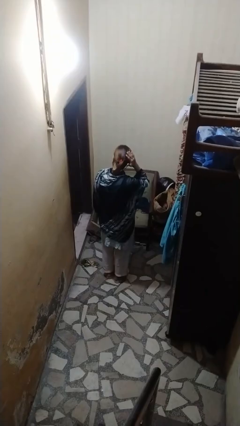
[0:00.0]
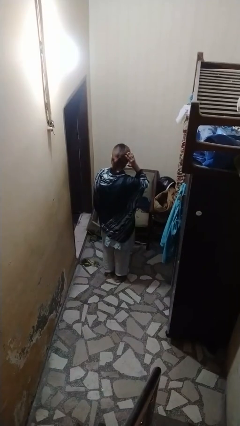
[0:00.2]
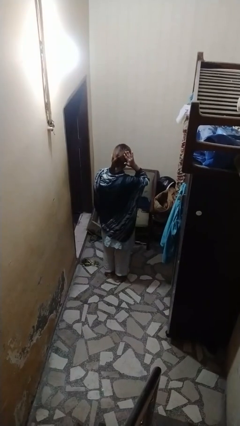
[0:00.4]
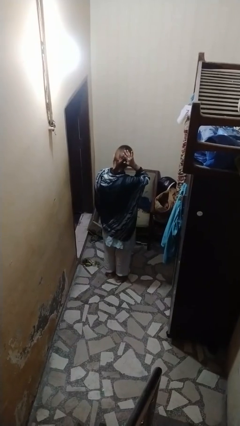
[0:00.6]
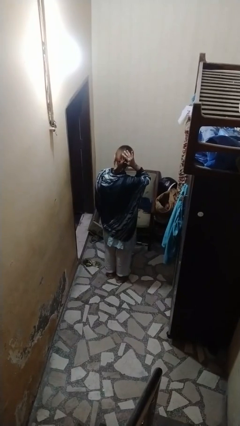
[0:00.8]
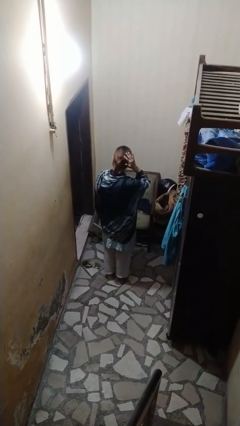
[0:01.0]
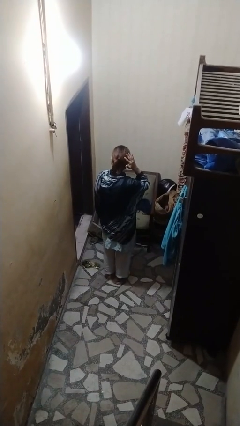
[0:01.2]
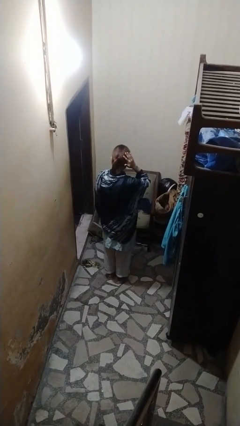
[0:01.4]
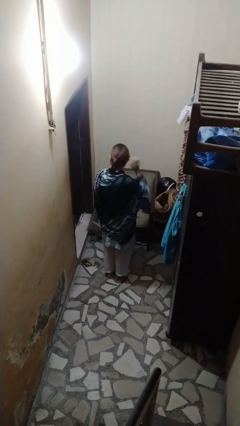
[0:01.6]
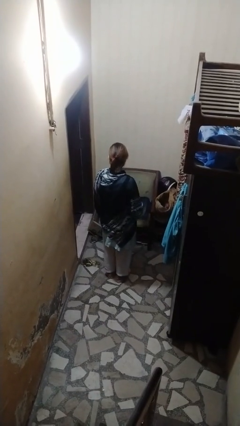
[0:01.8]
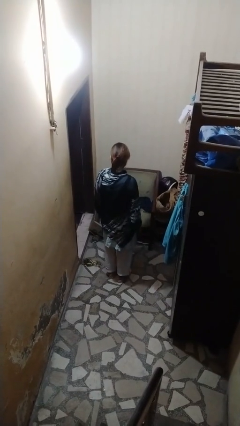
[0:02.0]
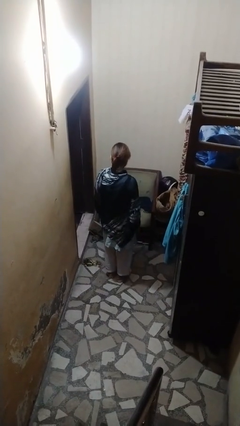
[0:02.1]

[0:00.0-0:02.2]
person strokes hair

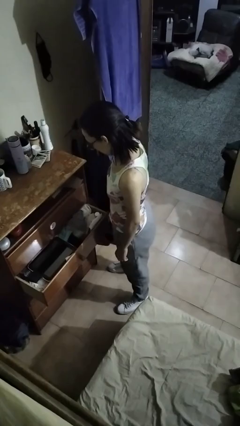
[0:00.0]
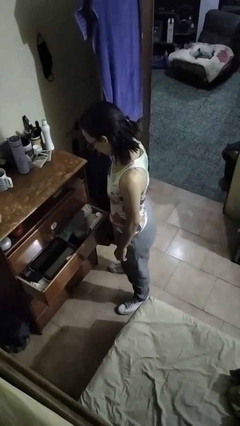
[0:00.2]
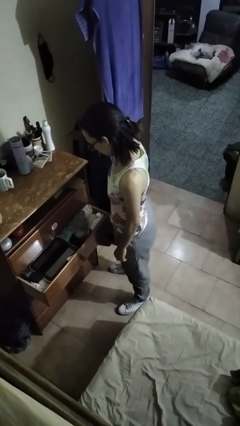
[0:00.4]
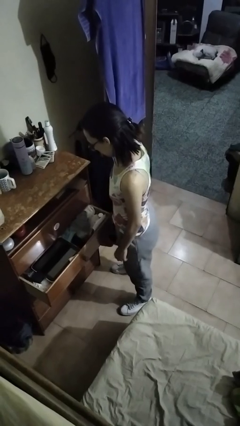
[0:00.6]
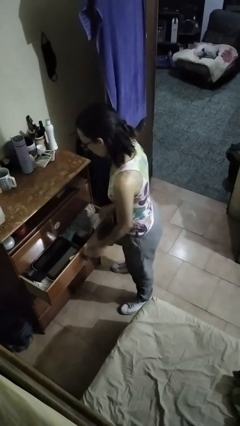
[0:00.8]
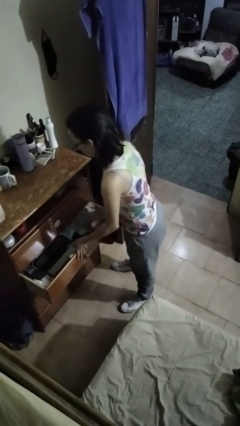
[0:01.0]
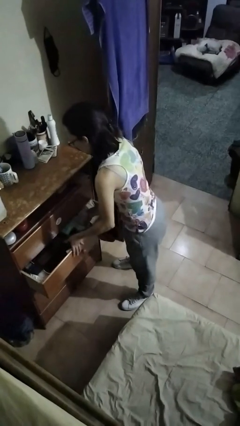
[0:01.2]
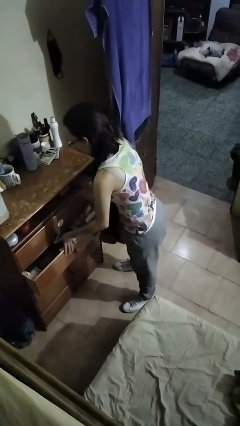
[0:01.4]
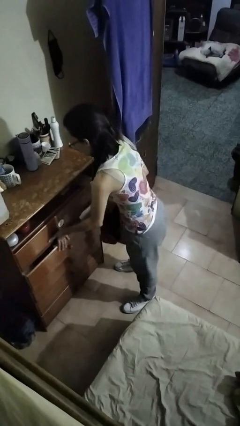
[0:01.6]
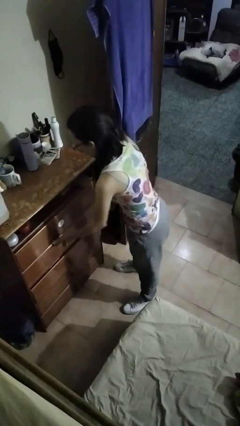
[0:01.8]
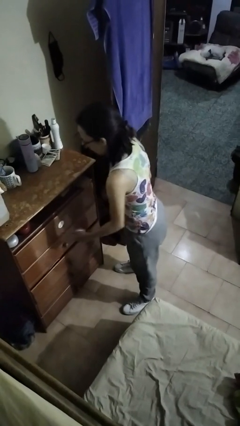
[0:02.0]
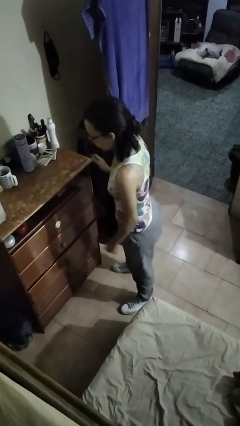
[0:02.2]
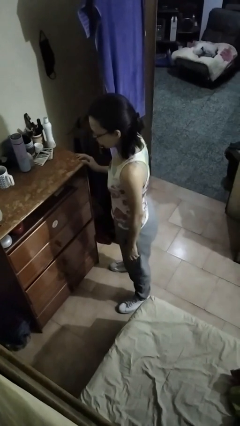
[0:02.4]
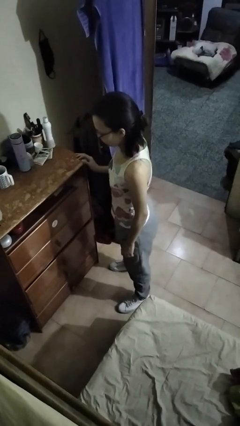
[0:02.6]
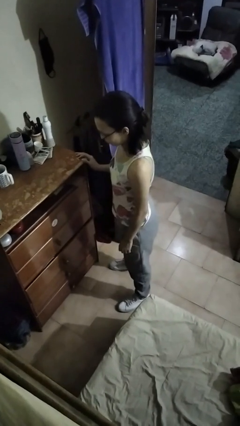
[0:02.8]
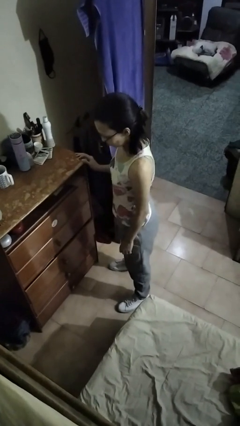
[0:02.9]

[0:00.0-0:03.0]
person closes dresser drawer

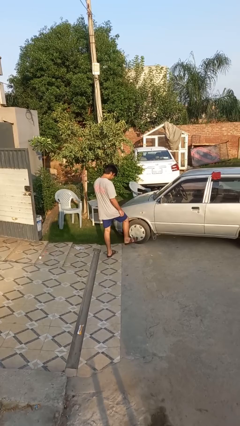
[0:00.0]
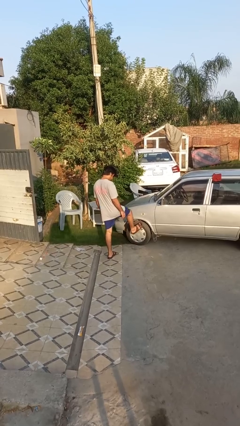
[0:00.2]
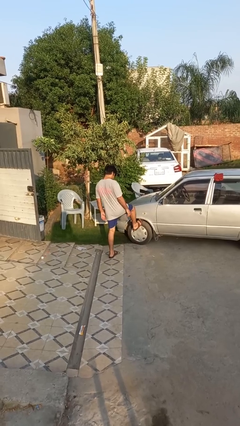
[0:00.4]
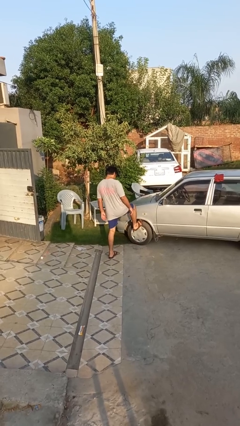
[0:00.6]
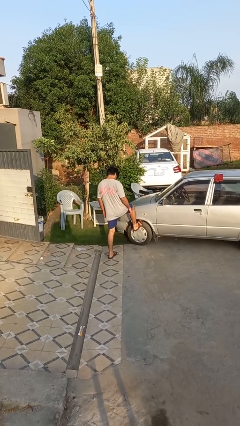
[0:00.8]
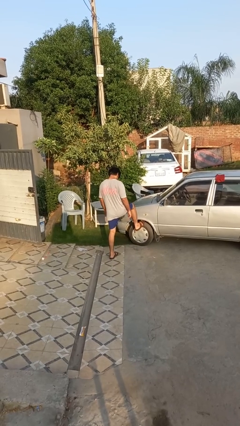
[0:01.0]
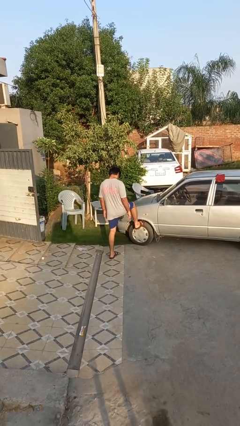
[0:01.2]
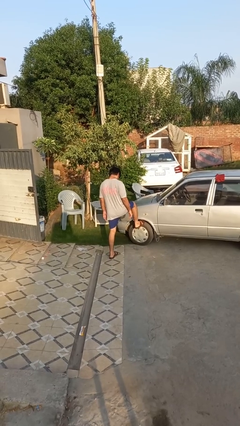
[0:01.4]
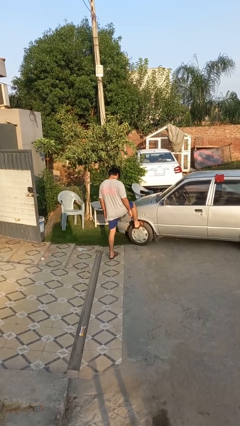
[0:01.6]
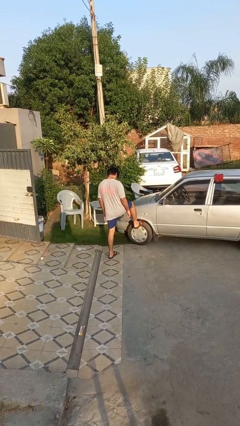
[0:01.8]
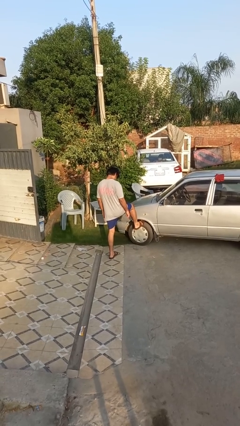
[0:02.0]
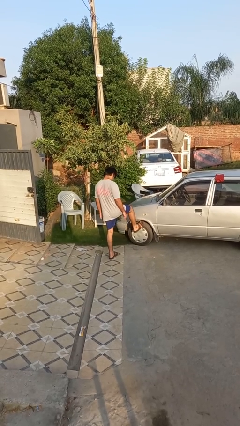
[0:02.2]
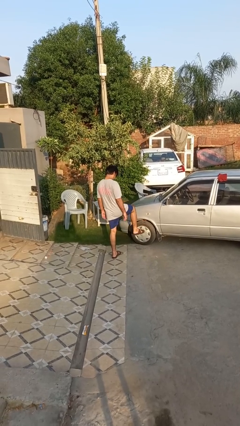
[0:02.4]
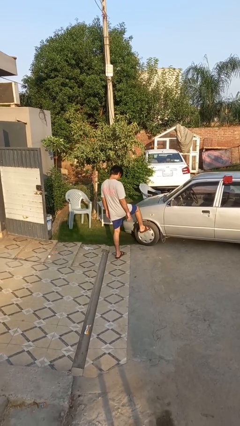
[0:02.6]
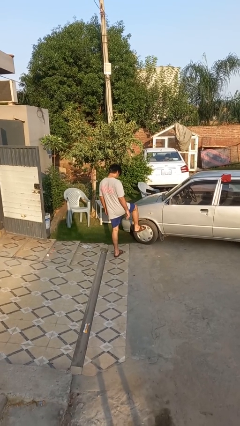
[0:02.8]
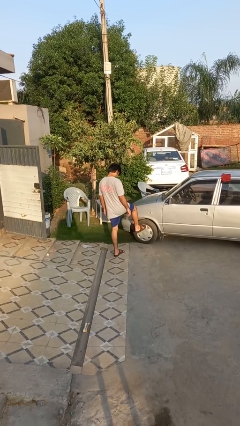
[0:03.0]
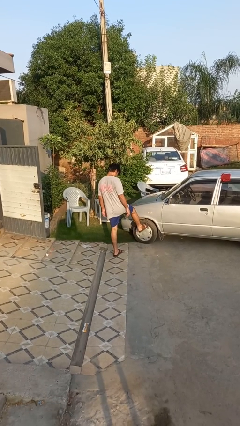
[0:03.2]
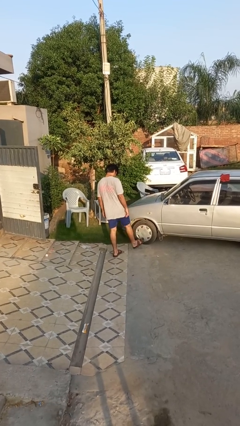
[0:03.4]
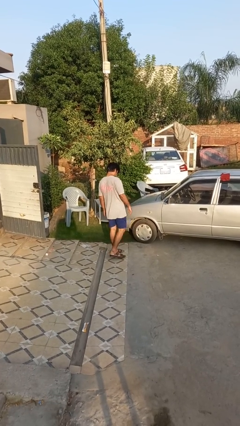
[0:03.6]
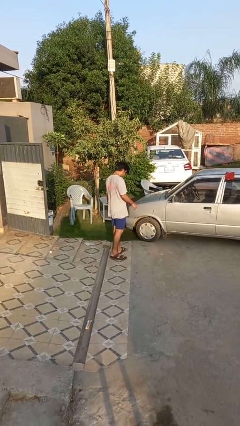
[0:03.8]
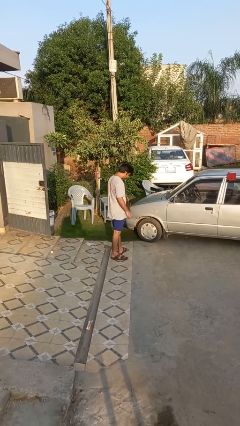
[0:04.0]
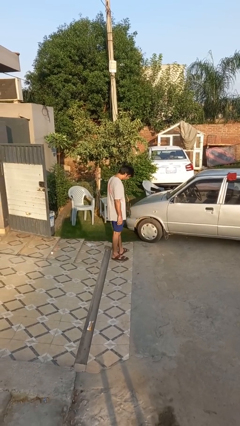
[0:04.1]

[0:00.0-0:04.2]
person kicks car tires

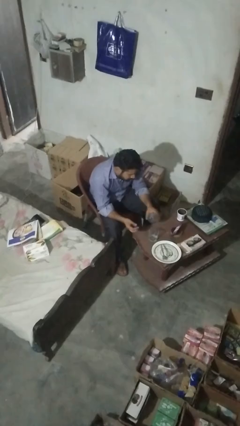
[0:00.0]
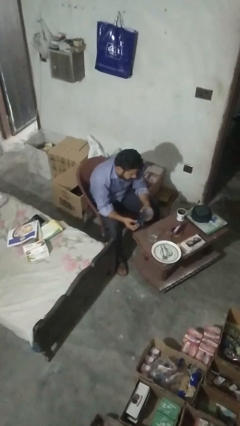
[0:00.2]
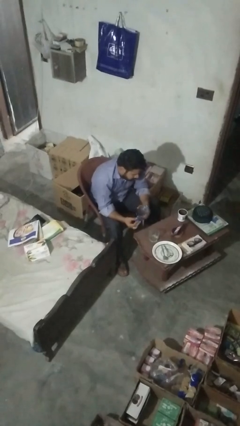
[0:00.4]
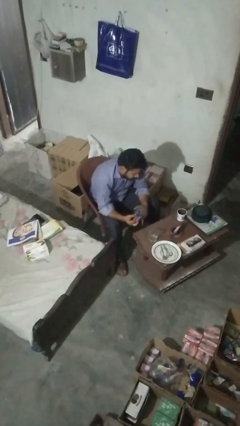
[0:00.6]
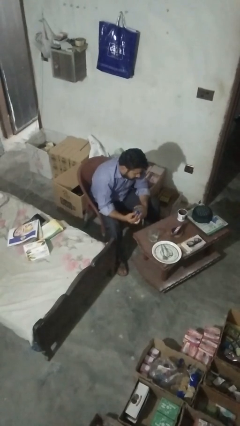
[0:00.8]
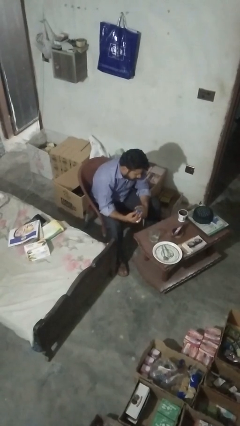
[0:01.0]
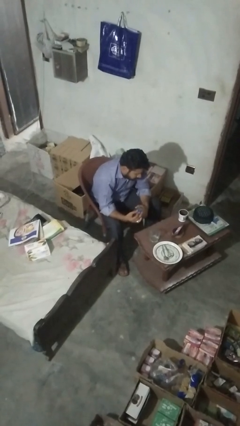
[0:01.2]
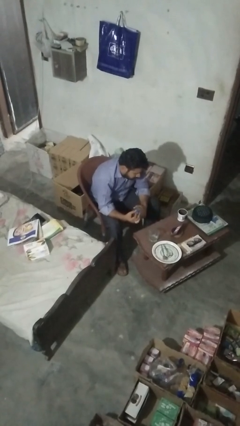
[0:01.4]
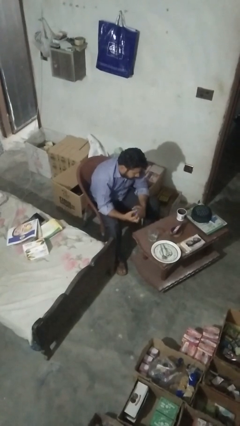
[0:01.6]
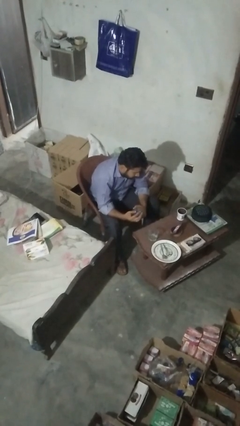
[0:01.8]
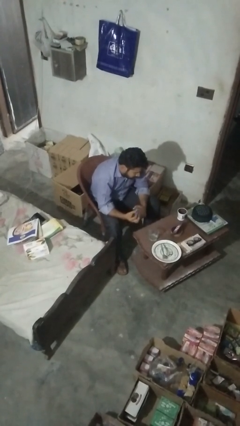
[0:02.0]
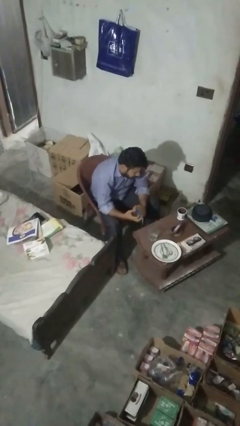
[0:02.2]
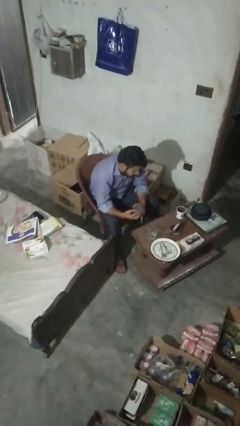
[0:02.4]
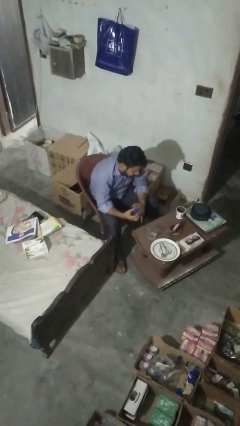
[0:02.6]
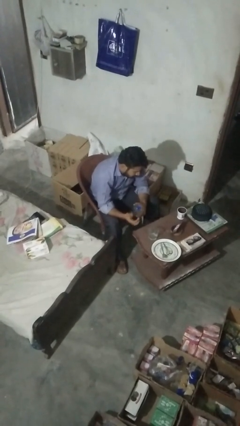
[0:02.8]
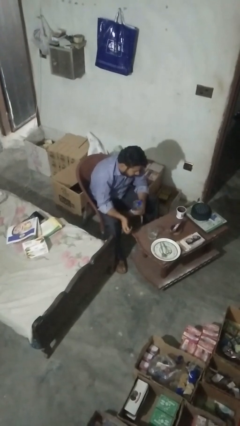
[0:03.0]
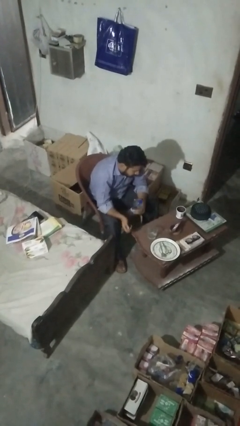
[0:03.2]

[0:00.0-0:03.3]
person screws lid to bottle

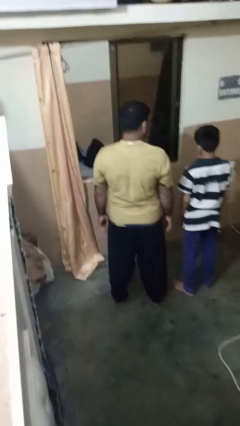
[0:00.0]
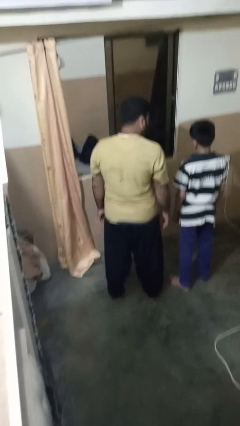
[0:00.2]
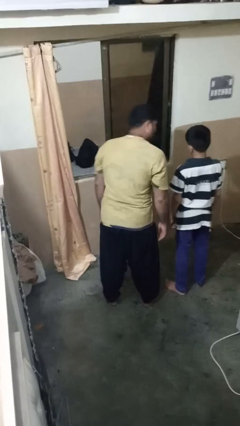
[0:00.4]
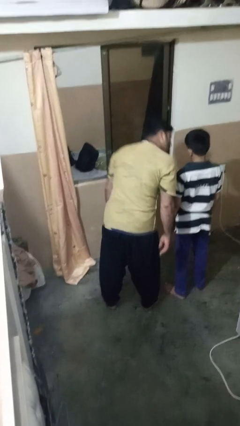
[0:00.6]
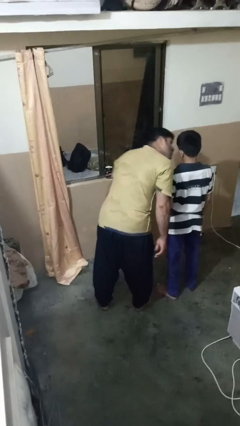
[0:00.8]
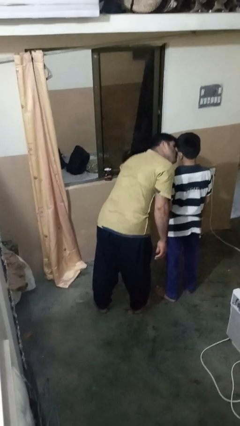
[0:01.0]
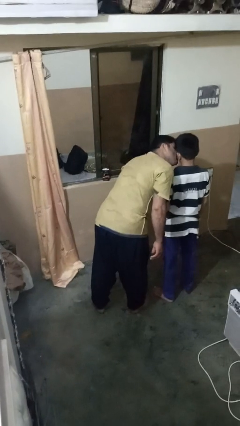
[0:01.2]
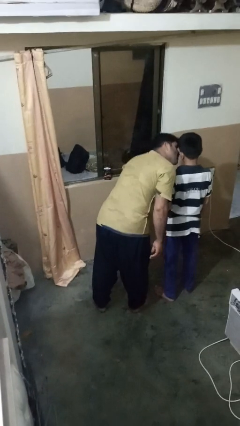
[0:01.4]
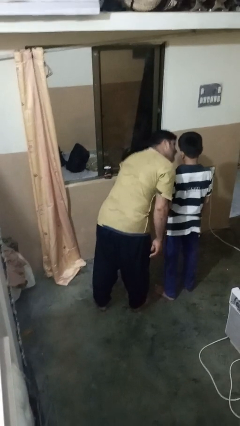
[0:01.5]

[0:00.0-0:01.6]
person kisses cheek of person

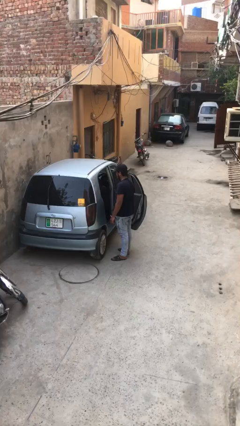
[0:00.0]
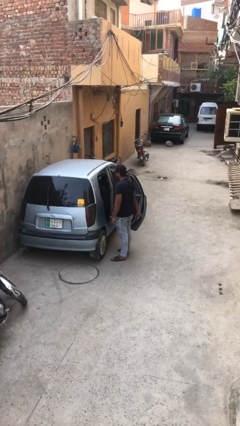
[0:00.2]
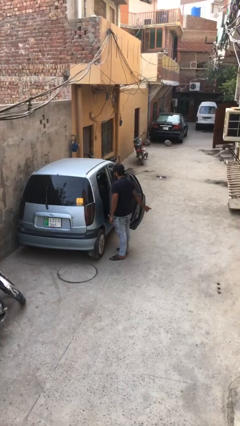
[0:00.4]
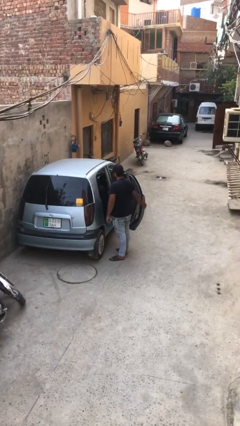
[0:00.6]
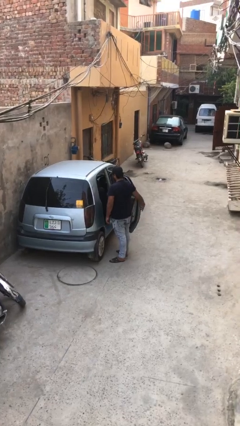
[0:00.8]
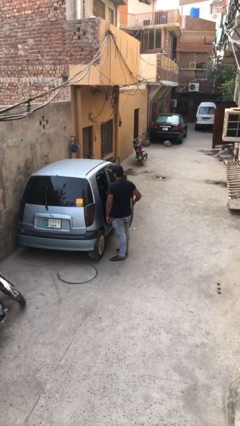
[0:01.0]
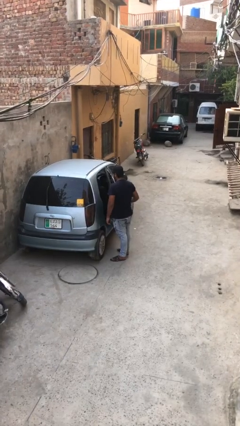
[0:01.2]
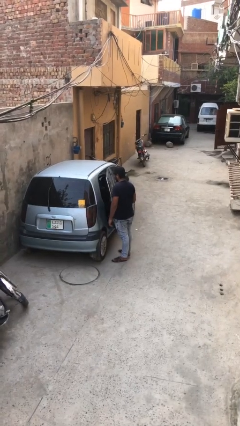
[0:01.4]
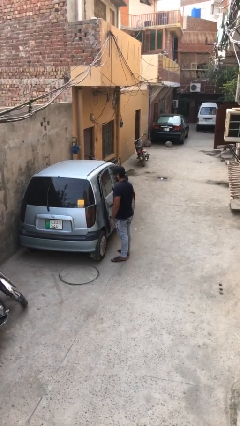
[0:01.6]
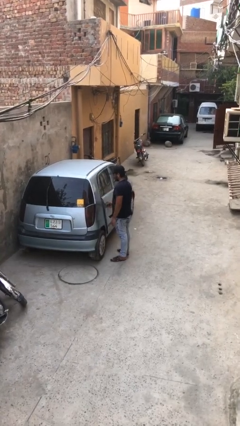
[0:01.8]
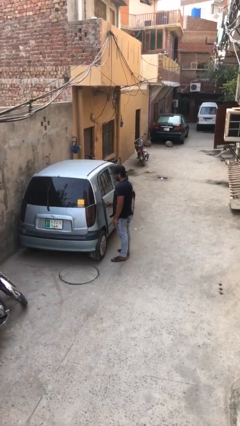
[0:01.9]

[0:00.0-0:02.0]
person closes car door

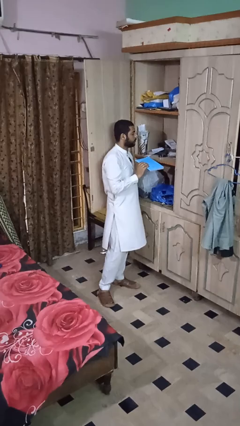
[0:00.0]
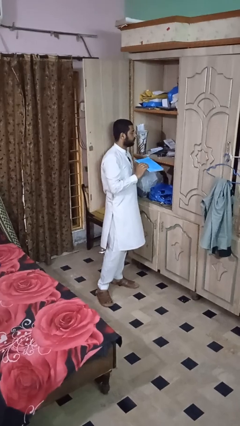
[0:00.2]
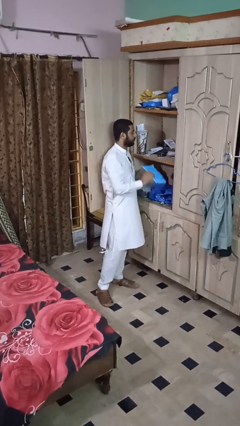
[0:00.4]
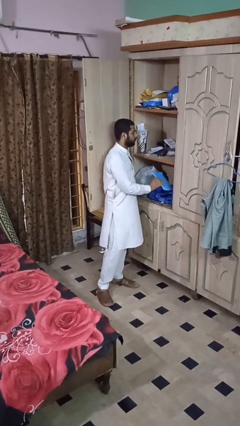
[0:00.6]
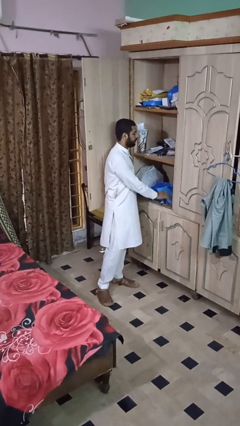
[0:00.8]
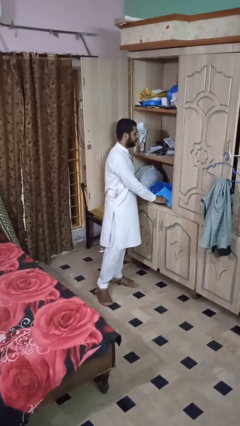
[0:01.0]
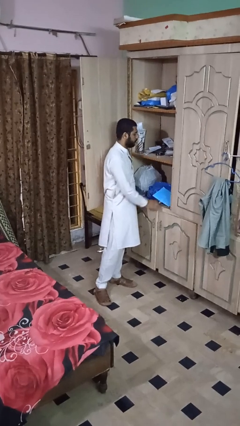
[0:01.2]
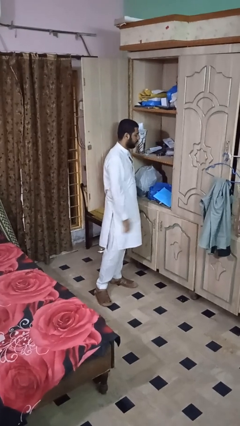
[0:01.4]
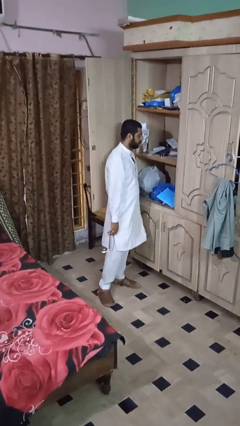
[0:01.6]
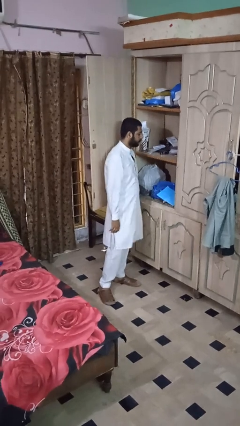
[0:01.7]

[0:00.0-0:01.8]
person puts down object on shelf
